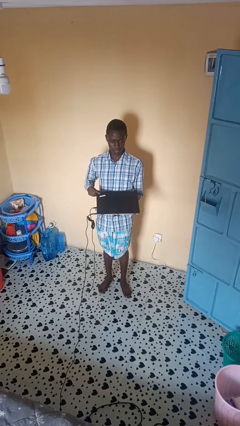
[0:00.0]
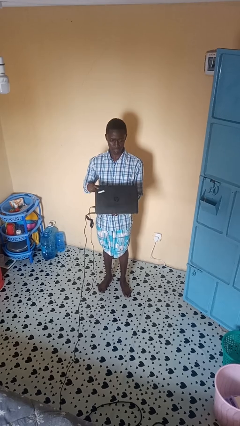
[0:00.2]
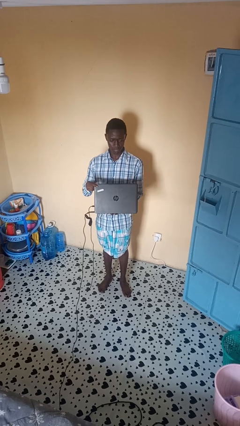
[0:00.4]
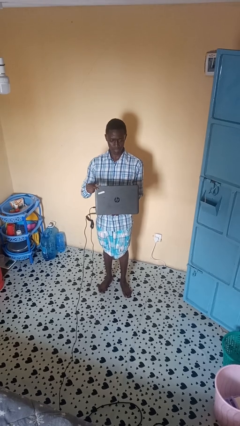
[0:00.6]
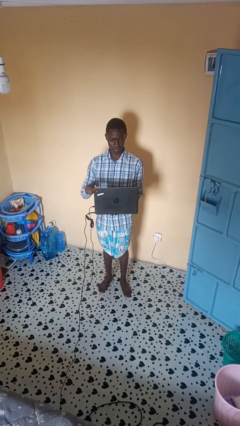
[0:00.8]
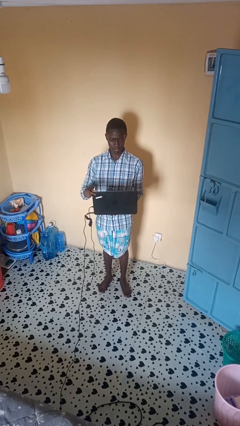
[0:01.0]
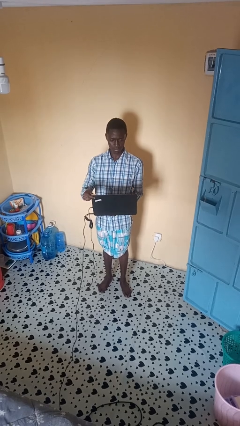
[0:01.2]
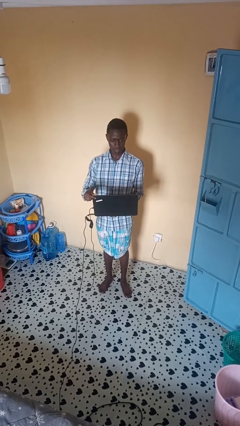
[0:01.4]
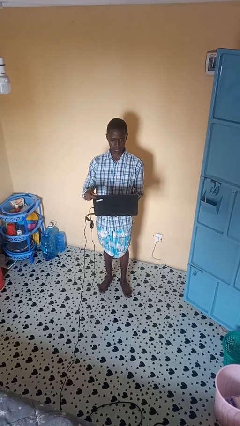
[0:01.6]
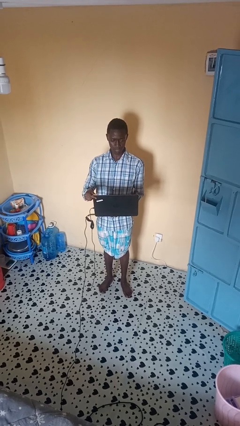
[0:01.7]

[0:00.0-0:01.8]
person opens laptop

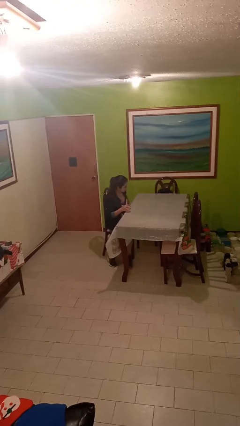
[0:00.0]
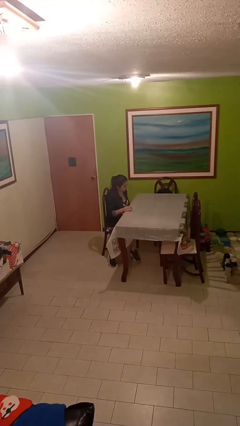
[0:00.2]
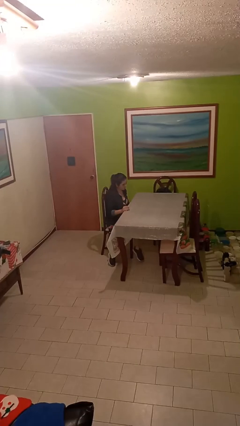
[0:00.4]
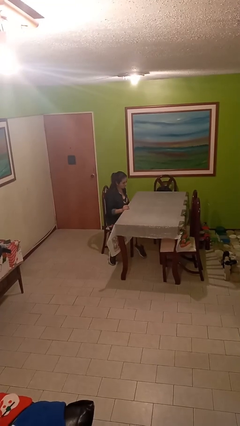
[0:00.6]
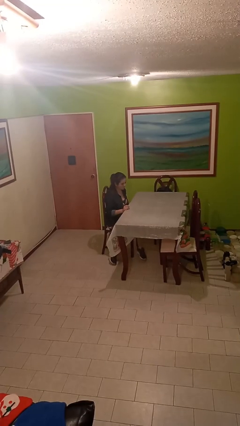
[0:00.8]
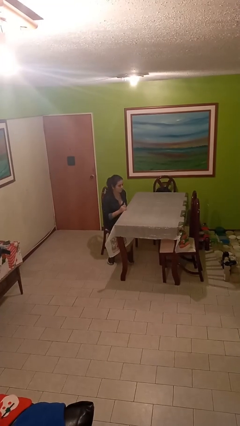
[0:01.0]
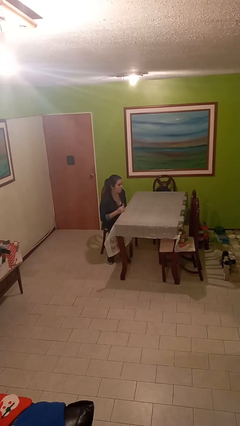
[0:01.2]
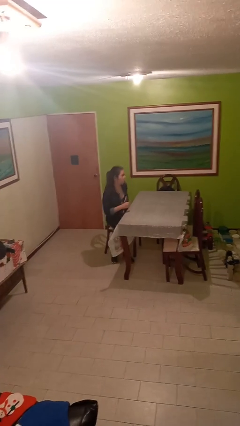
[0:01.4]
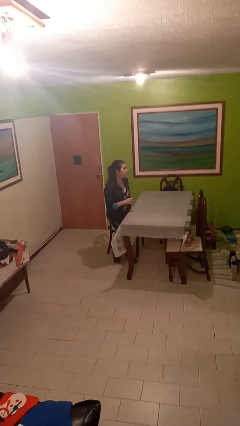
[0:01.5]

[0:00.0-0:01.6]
person sits down

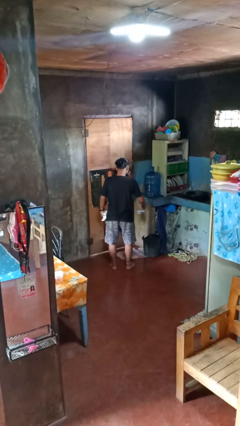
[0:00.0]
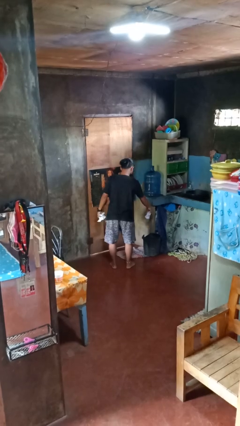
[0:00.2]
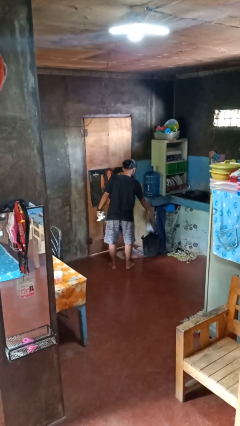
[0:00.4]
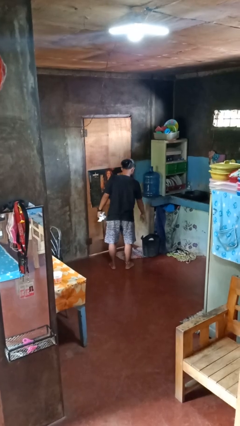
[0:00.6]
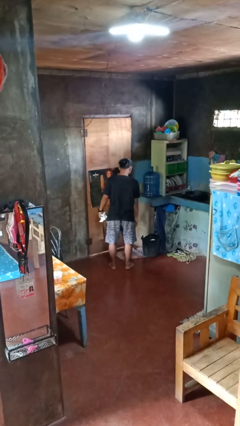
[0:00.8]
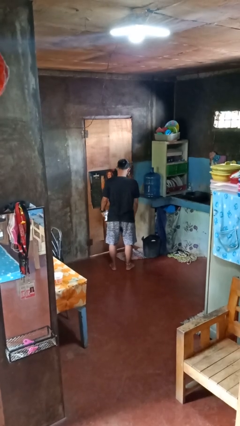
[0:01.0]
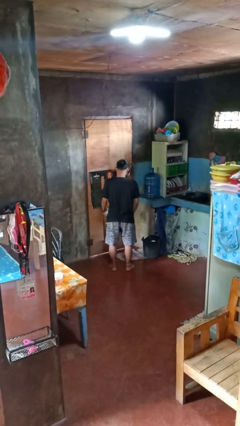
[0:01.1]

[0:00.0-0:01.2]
person discards trash

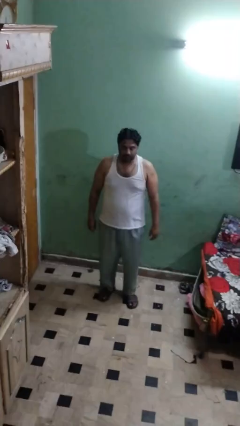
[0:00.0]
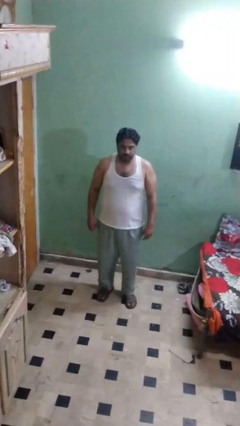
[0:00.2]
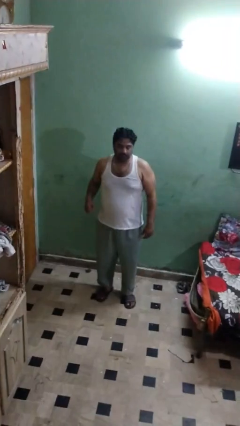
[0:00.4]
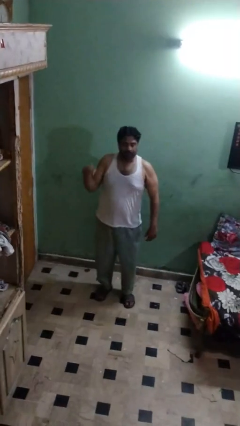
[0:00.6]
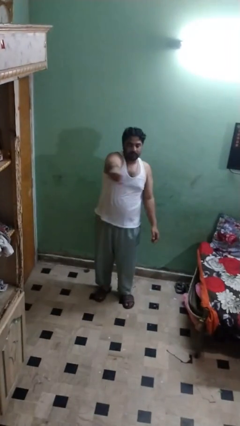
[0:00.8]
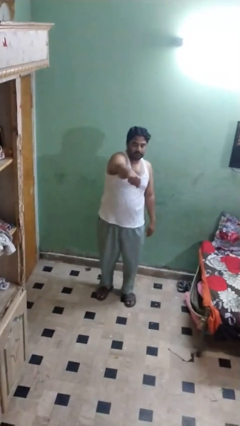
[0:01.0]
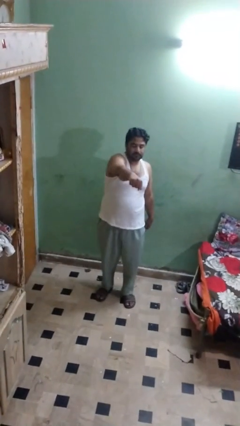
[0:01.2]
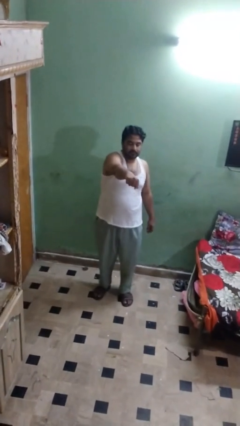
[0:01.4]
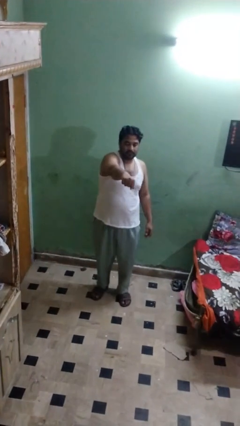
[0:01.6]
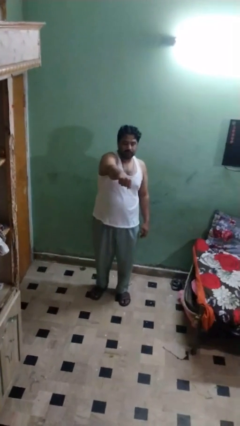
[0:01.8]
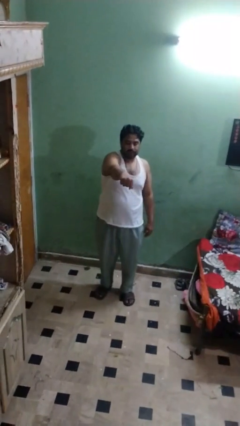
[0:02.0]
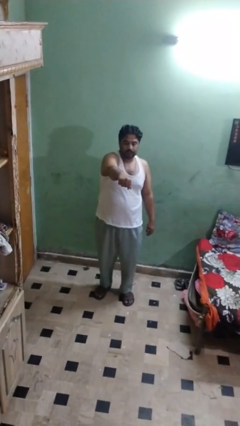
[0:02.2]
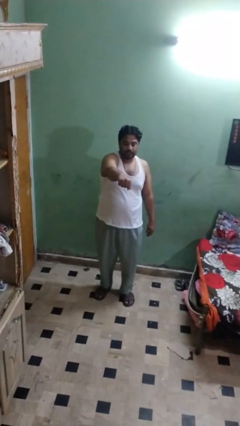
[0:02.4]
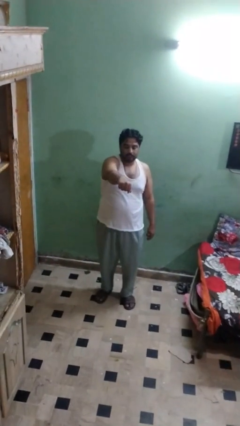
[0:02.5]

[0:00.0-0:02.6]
person punches

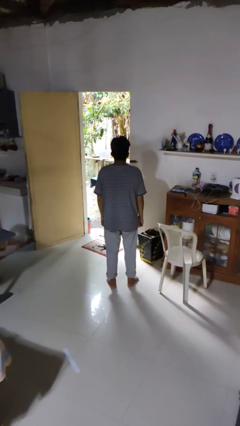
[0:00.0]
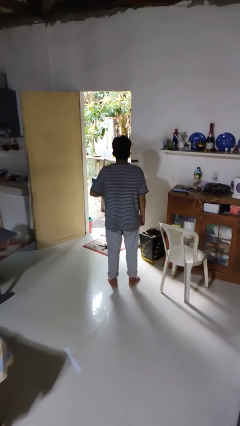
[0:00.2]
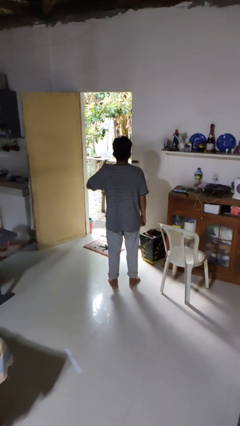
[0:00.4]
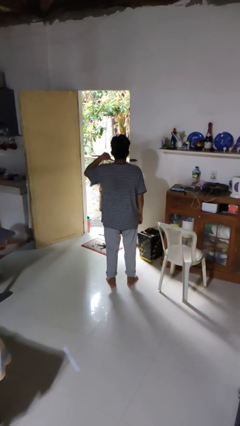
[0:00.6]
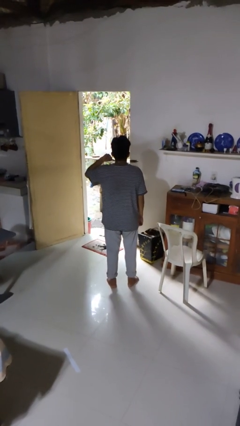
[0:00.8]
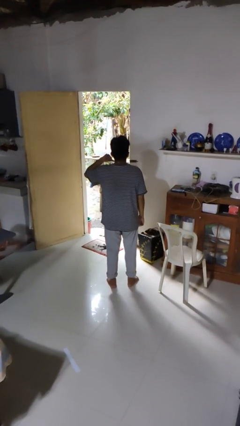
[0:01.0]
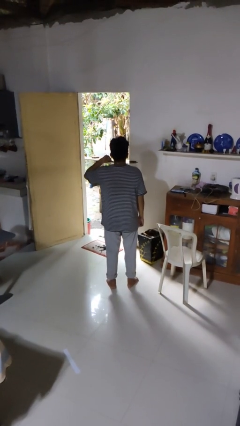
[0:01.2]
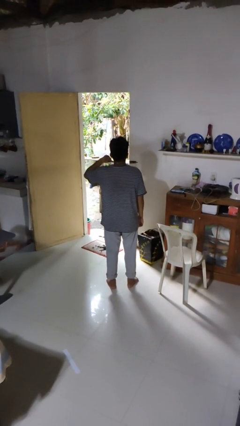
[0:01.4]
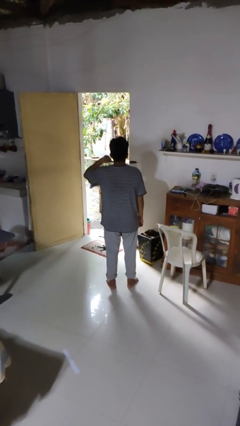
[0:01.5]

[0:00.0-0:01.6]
person gestures call me

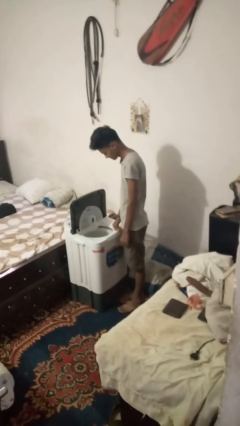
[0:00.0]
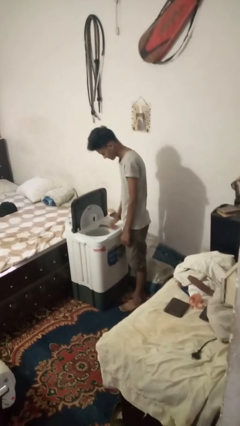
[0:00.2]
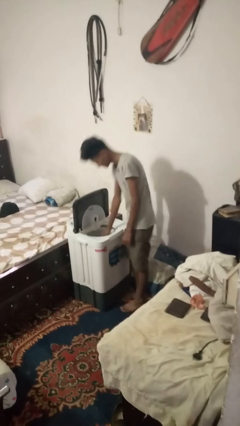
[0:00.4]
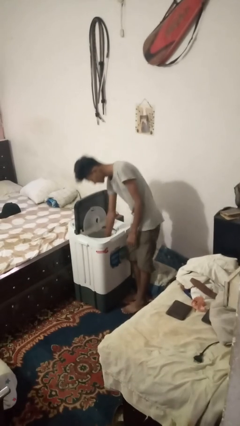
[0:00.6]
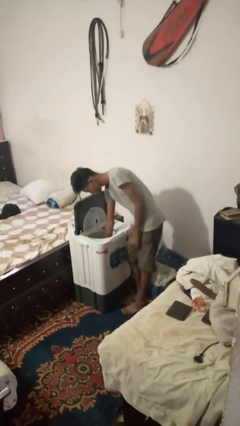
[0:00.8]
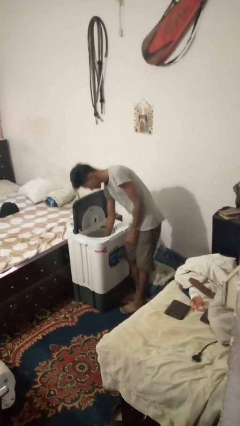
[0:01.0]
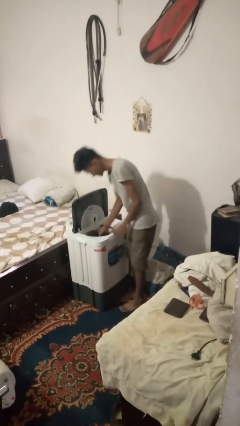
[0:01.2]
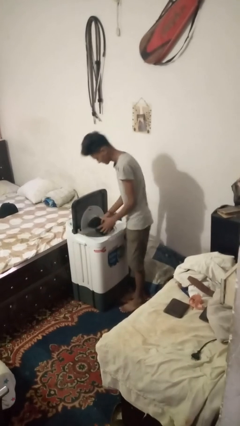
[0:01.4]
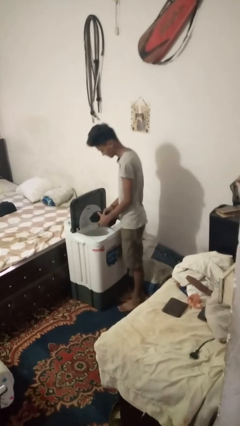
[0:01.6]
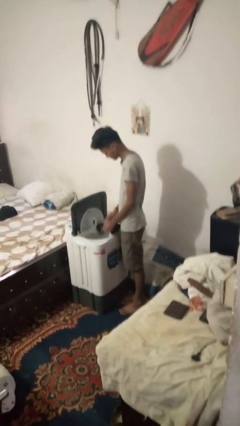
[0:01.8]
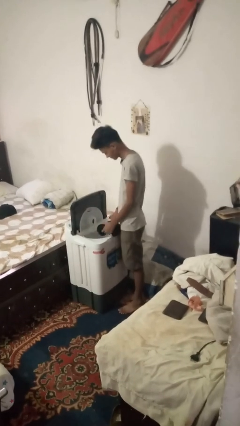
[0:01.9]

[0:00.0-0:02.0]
person unloads clotheswasher

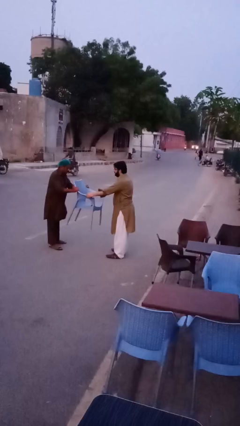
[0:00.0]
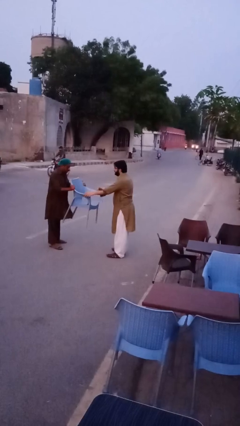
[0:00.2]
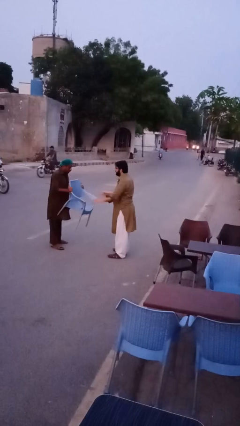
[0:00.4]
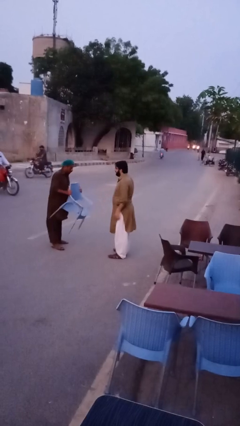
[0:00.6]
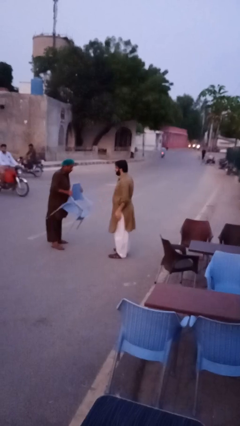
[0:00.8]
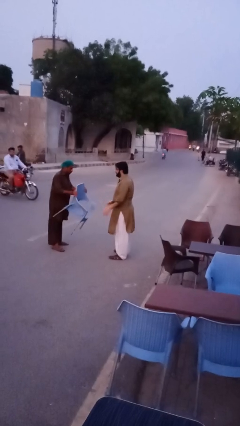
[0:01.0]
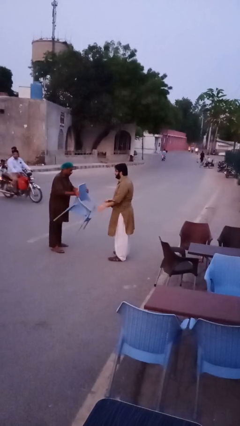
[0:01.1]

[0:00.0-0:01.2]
person transfers object to person

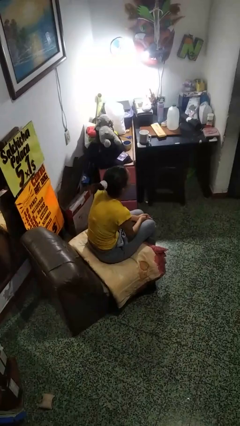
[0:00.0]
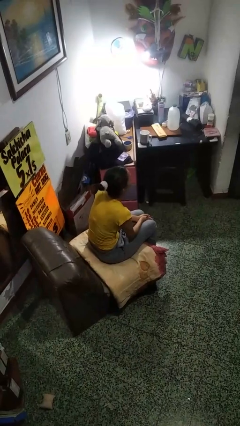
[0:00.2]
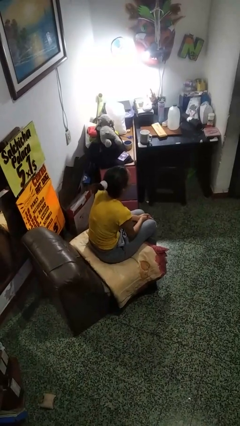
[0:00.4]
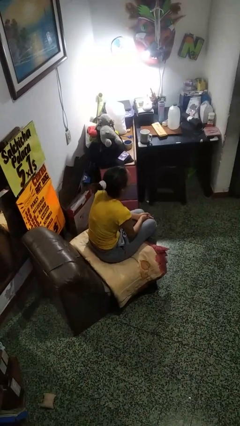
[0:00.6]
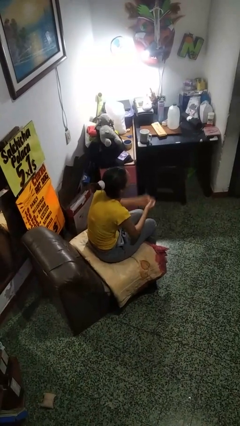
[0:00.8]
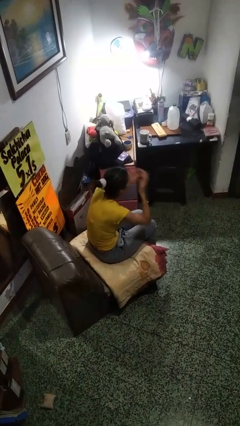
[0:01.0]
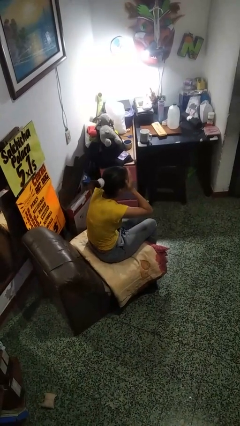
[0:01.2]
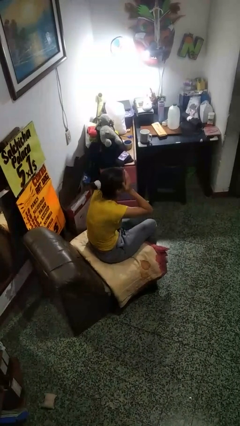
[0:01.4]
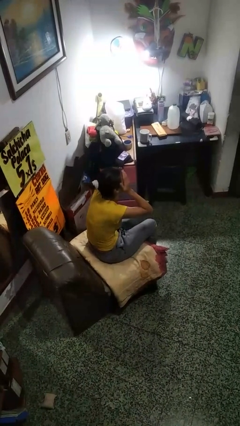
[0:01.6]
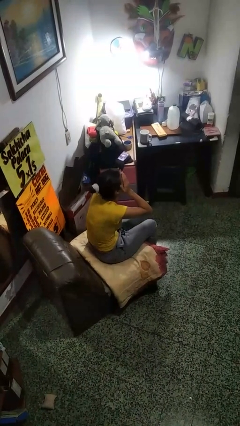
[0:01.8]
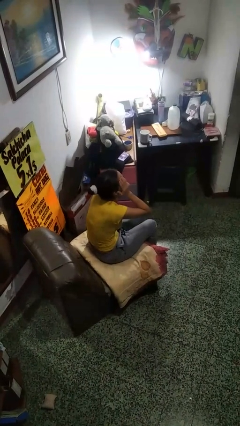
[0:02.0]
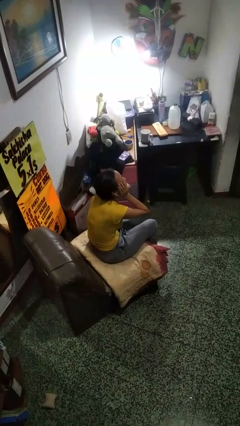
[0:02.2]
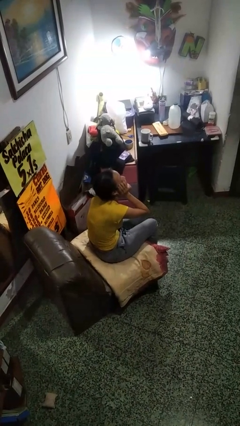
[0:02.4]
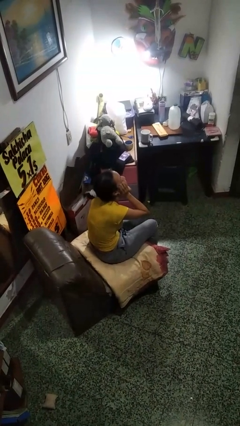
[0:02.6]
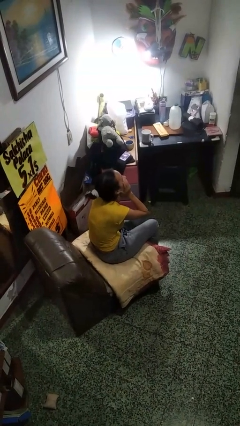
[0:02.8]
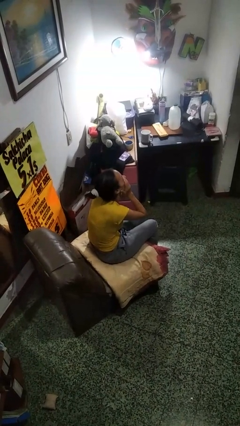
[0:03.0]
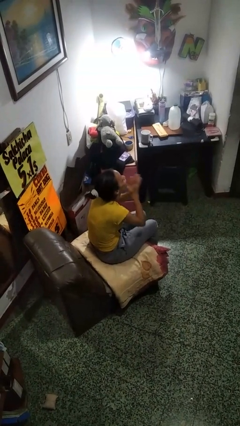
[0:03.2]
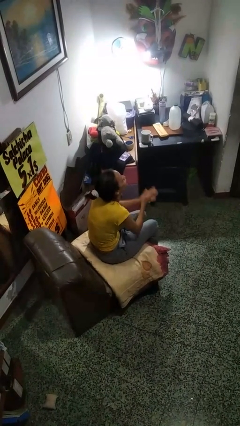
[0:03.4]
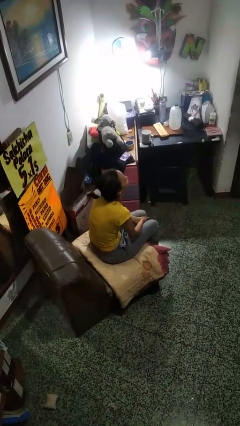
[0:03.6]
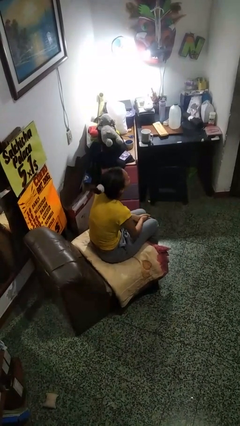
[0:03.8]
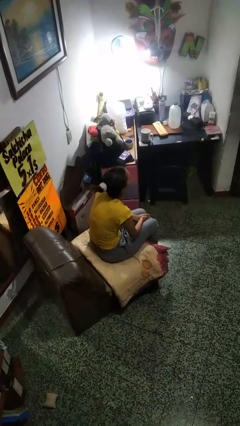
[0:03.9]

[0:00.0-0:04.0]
person covers face with hands

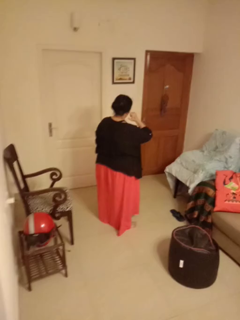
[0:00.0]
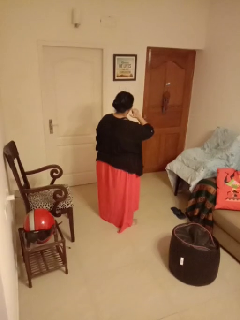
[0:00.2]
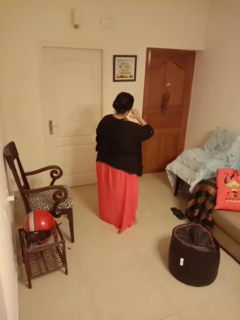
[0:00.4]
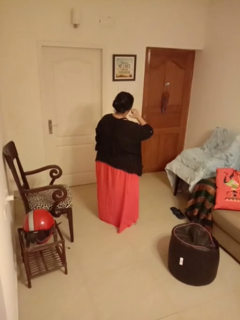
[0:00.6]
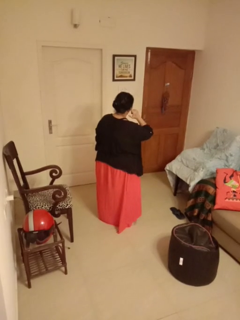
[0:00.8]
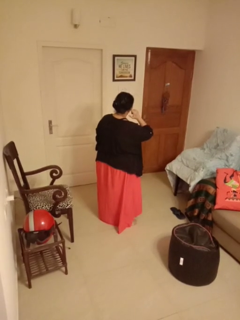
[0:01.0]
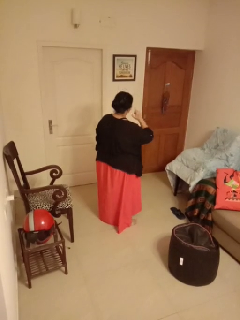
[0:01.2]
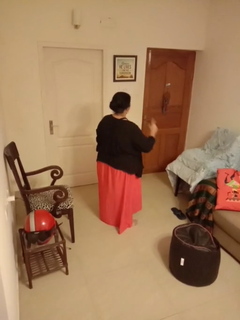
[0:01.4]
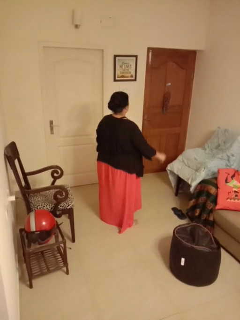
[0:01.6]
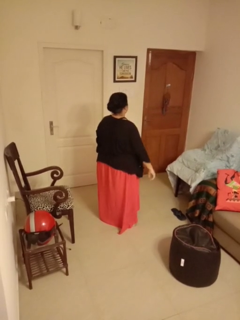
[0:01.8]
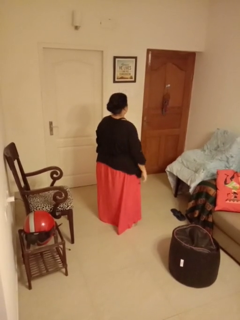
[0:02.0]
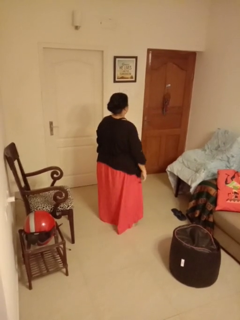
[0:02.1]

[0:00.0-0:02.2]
person gestures listen closely
